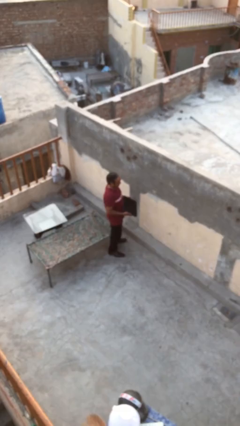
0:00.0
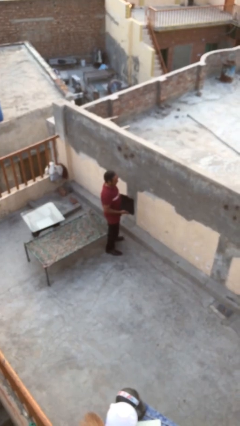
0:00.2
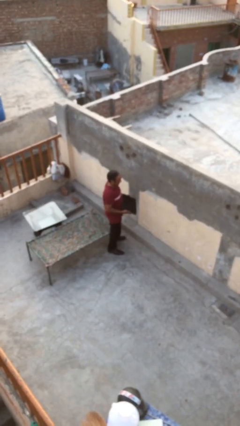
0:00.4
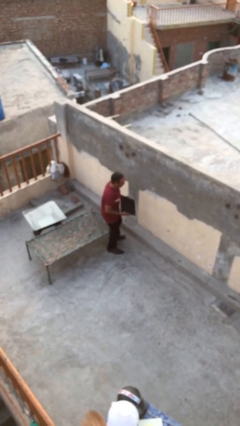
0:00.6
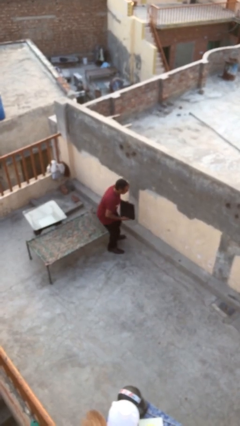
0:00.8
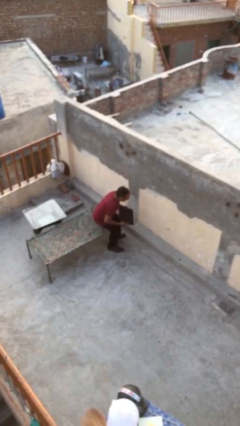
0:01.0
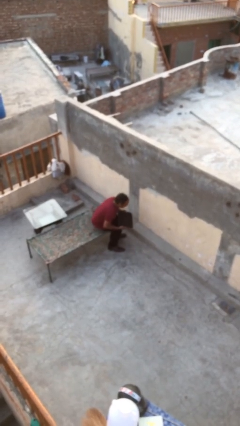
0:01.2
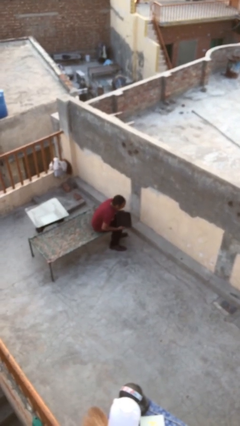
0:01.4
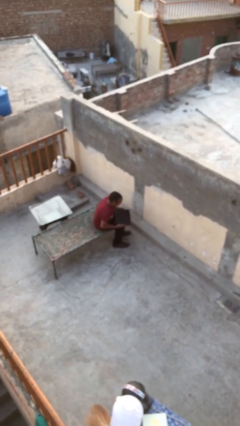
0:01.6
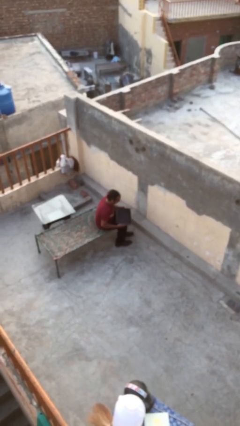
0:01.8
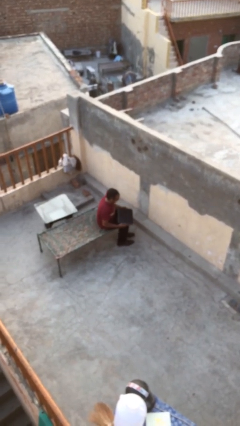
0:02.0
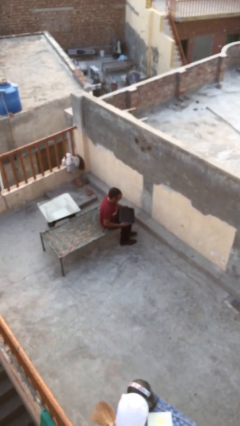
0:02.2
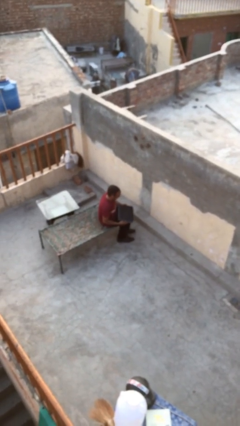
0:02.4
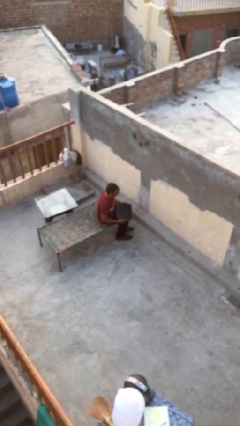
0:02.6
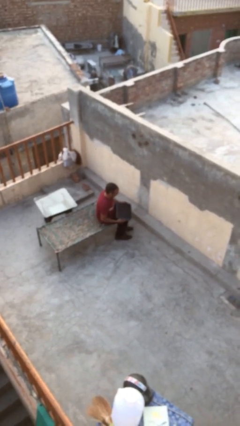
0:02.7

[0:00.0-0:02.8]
person sits down

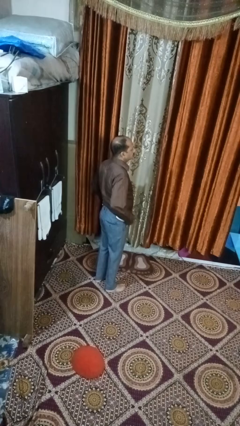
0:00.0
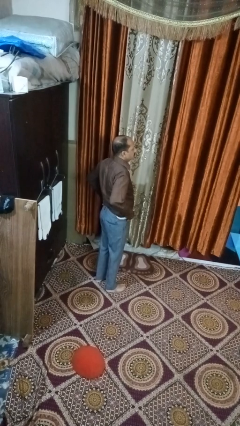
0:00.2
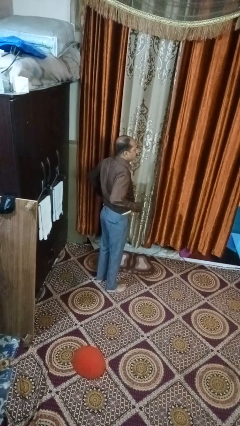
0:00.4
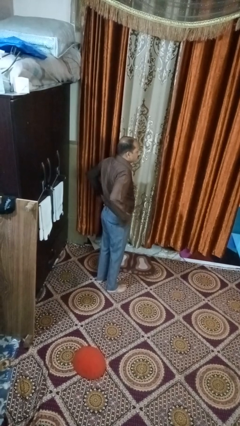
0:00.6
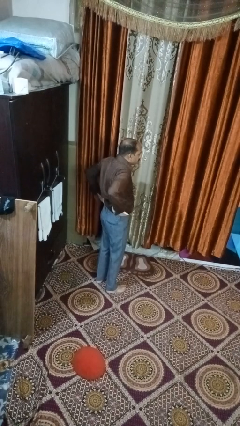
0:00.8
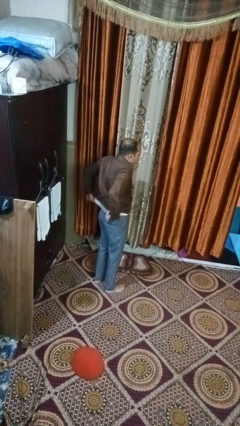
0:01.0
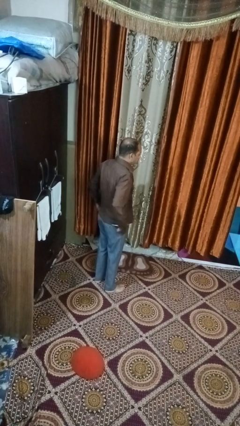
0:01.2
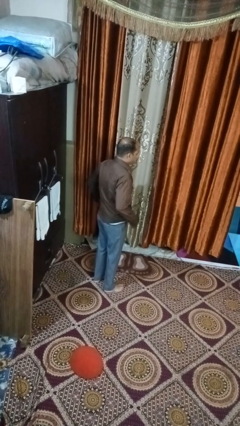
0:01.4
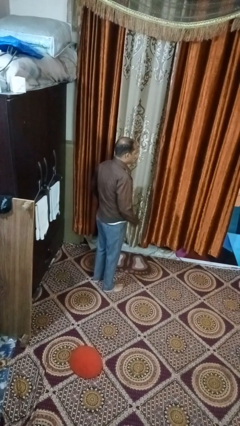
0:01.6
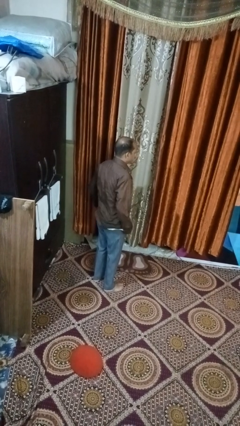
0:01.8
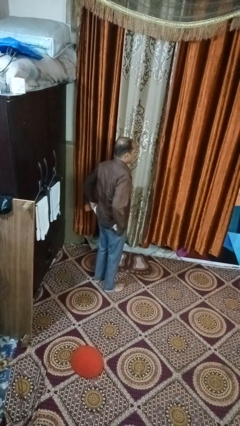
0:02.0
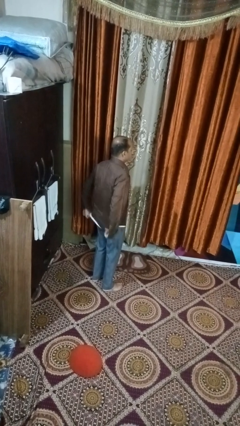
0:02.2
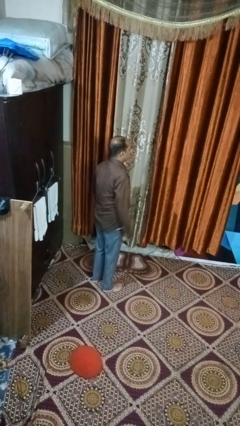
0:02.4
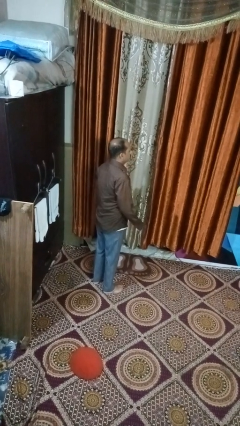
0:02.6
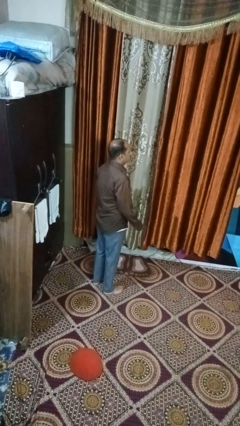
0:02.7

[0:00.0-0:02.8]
person untucks shirt

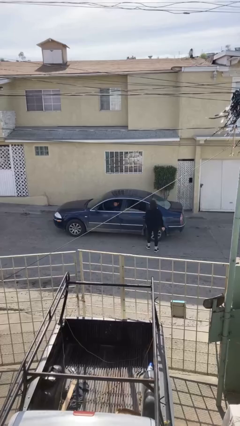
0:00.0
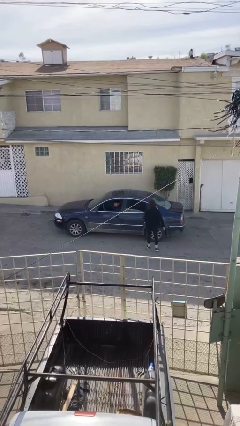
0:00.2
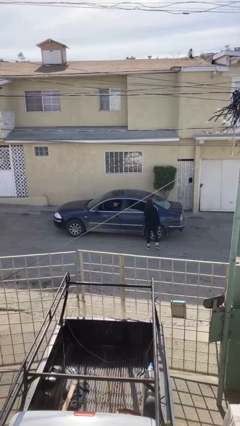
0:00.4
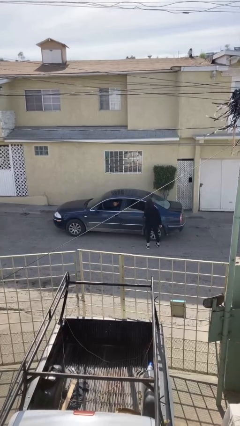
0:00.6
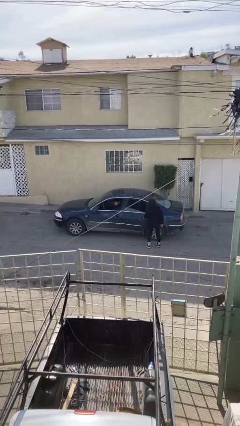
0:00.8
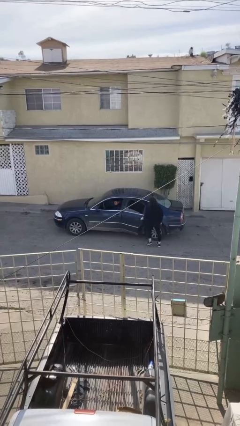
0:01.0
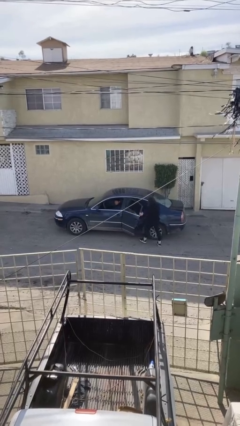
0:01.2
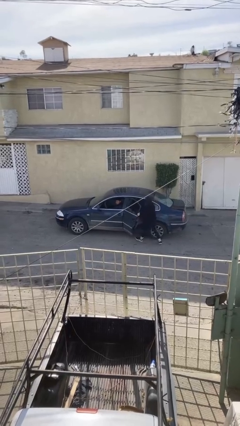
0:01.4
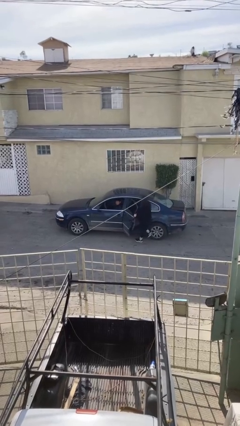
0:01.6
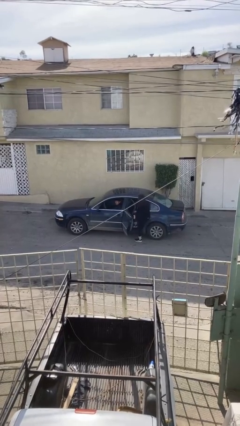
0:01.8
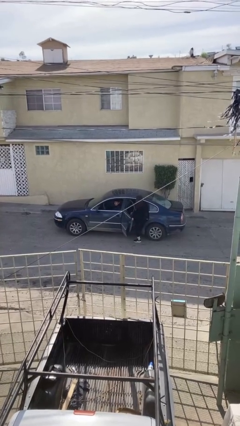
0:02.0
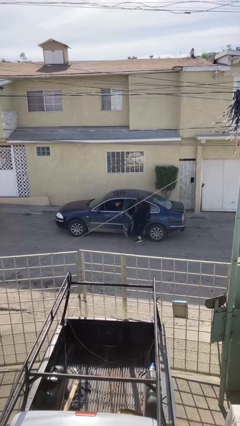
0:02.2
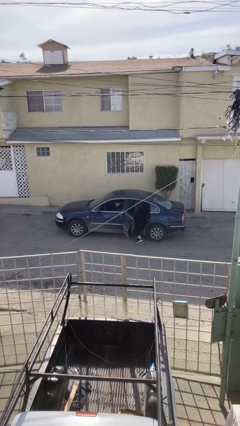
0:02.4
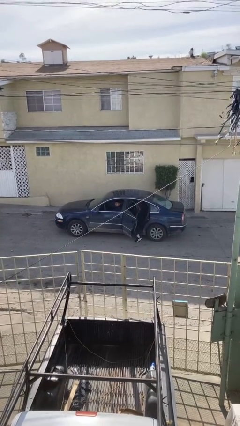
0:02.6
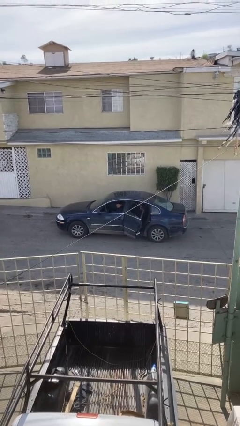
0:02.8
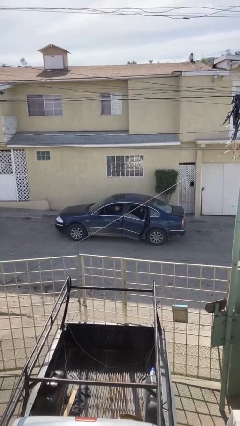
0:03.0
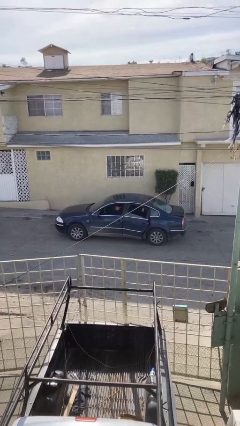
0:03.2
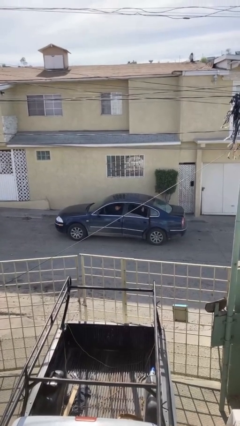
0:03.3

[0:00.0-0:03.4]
car picks up person

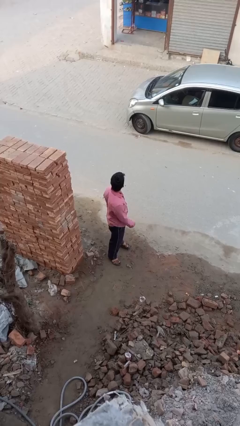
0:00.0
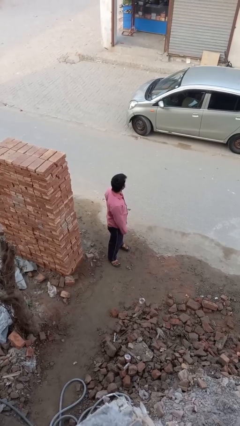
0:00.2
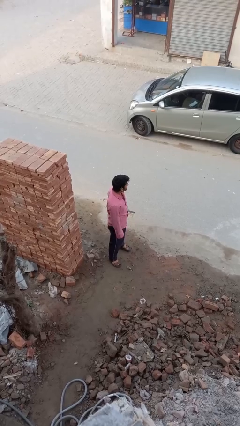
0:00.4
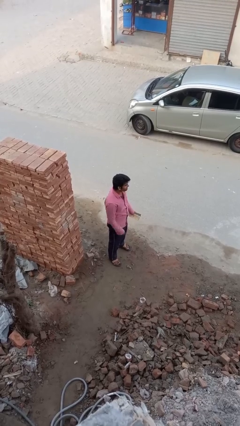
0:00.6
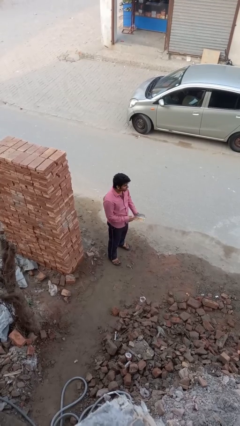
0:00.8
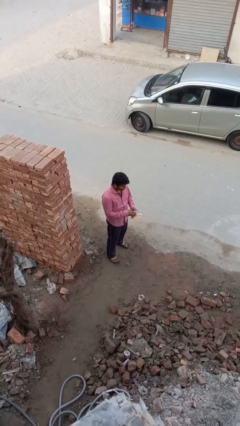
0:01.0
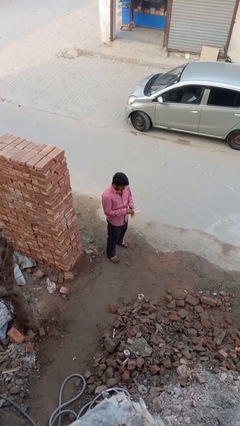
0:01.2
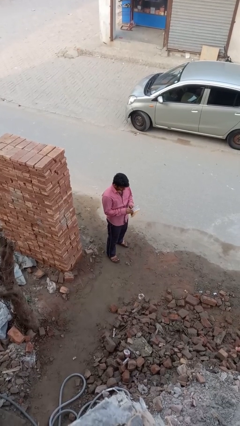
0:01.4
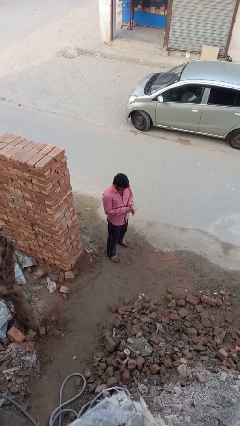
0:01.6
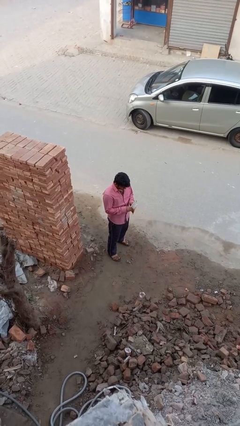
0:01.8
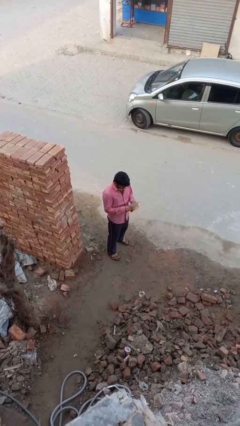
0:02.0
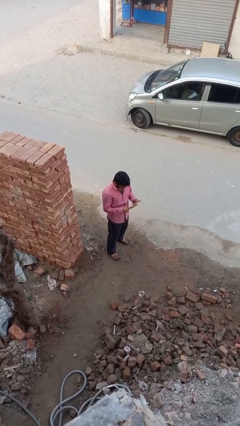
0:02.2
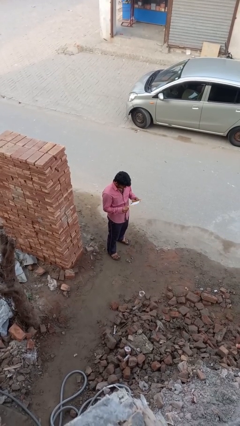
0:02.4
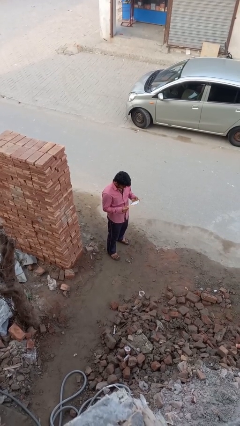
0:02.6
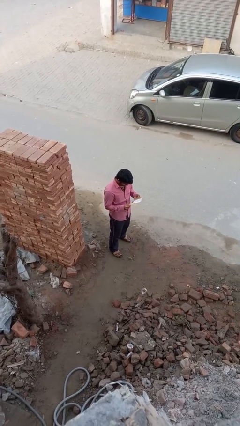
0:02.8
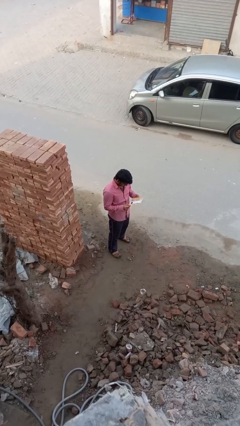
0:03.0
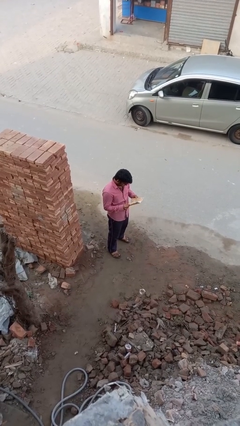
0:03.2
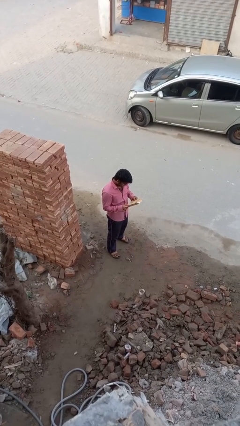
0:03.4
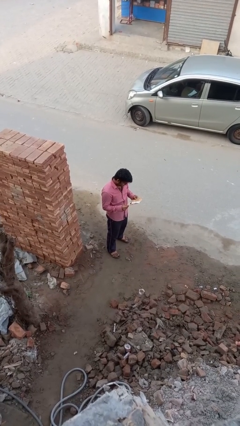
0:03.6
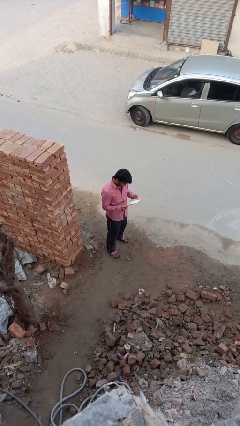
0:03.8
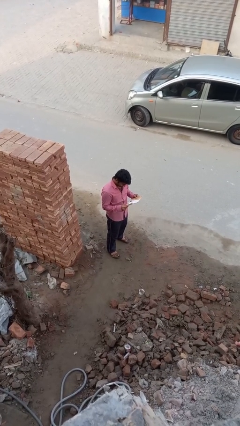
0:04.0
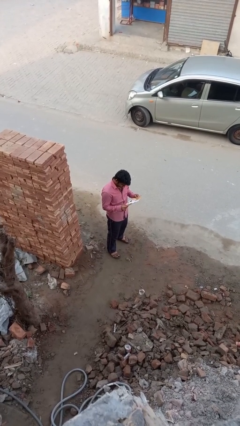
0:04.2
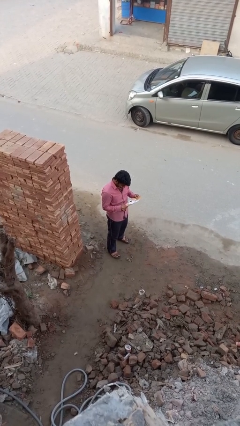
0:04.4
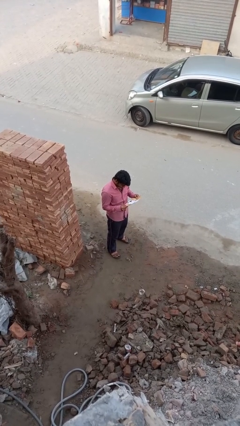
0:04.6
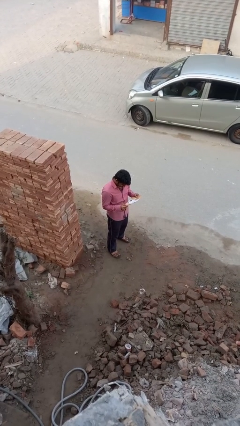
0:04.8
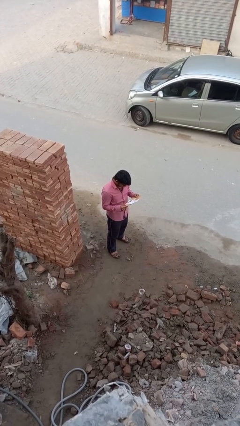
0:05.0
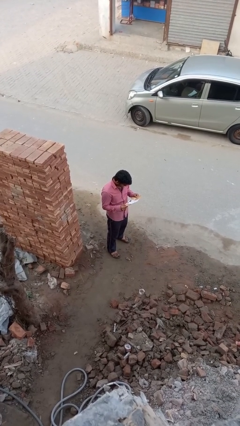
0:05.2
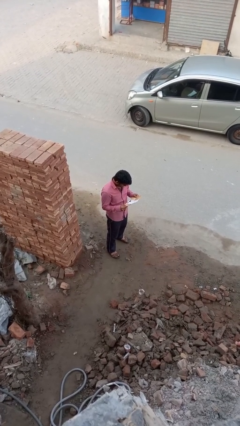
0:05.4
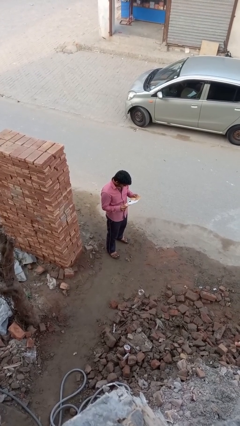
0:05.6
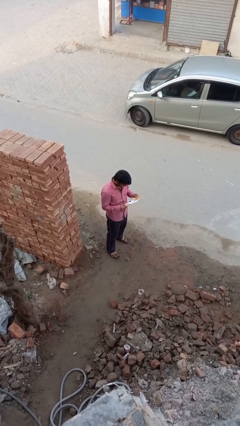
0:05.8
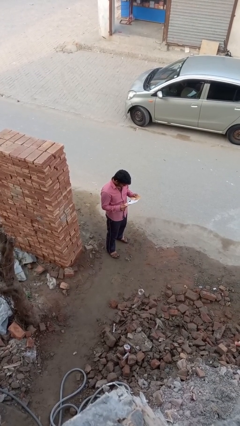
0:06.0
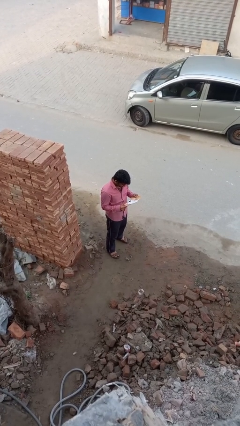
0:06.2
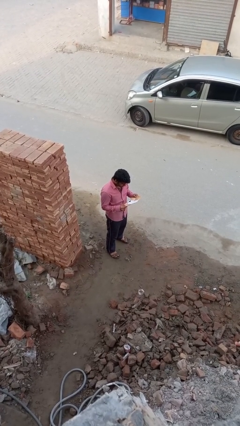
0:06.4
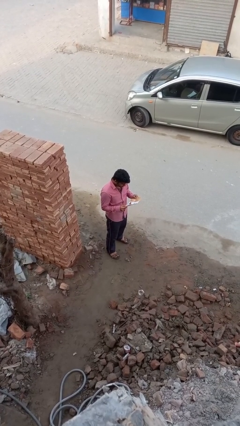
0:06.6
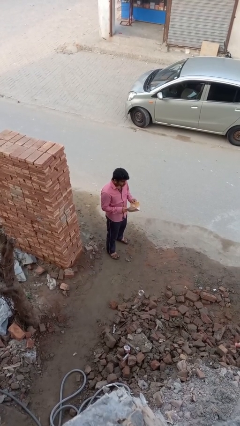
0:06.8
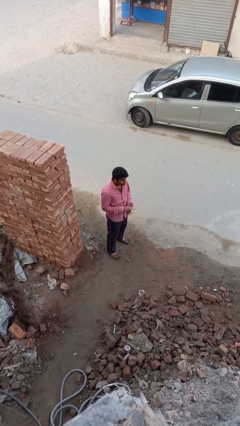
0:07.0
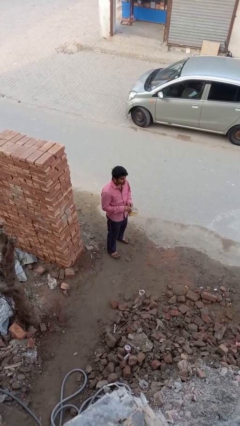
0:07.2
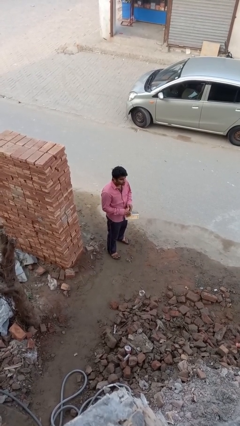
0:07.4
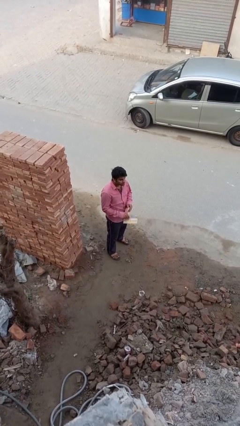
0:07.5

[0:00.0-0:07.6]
person reads document

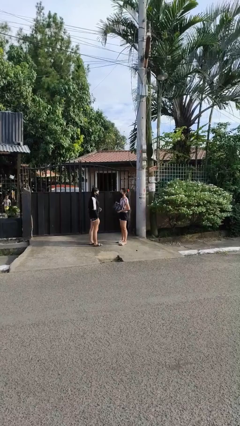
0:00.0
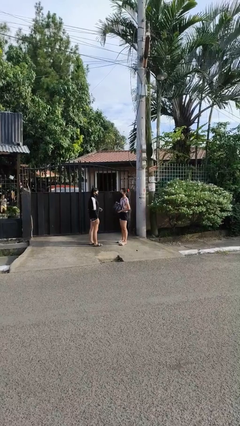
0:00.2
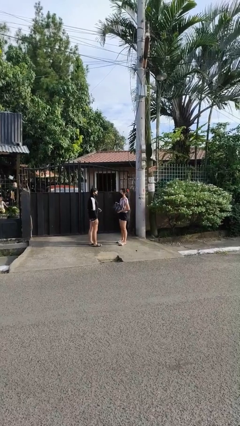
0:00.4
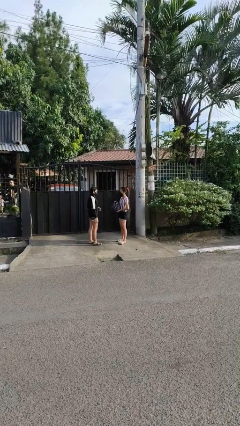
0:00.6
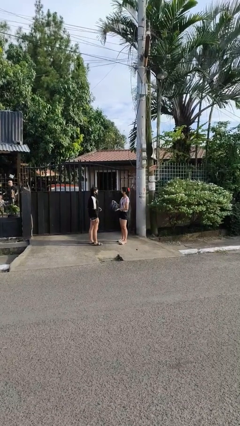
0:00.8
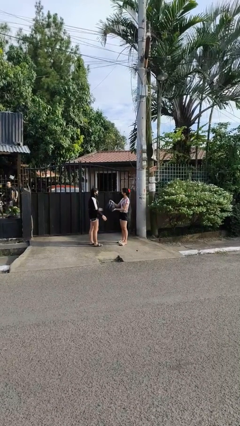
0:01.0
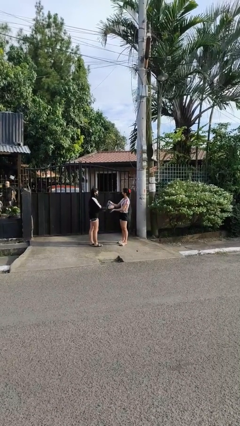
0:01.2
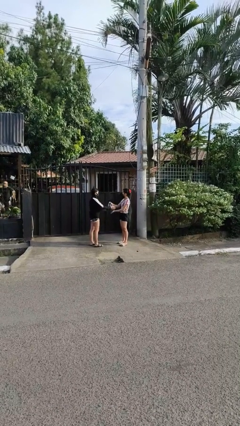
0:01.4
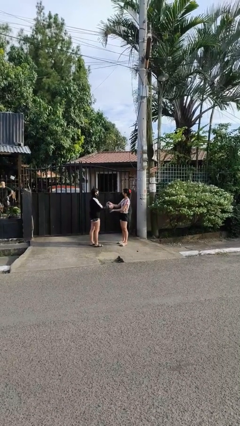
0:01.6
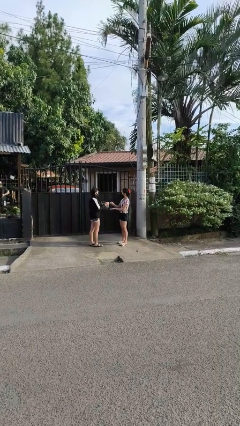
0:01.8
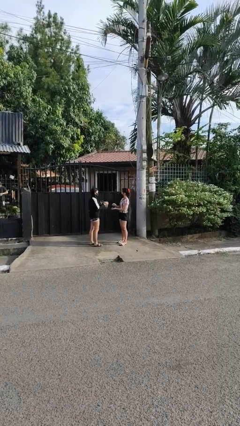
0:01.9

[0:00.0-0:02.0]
person transfers object to person
